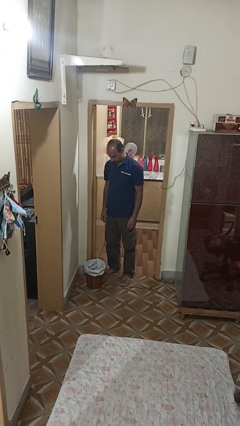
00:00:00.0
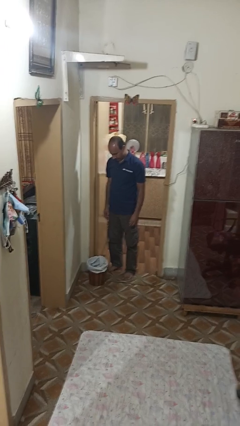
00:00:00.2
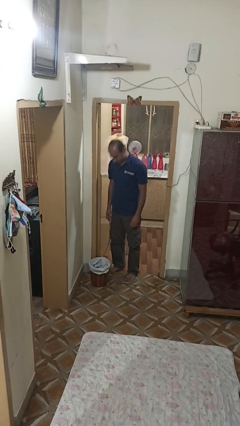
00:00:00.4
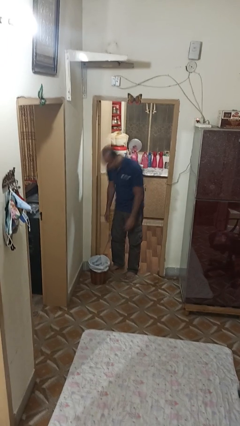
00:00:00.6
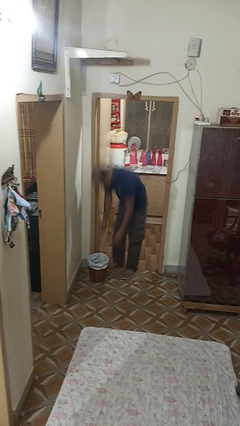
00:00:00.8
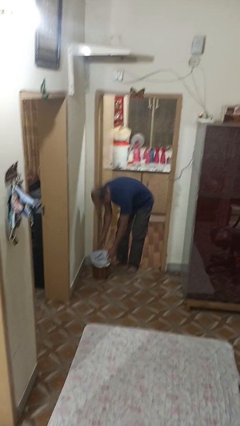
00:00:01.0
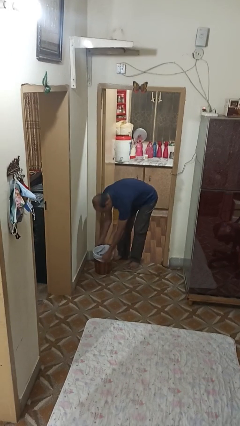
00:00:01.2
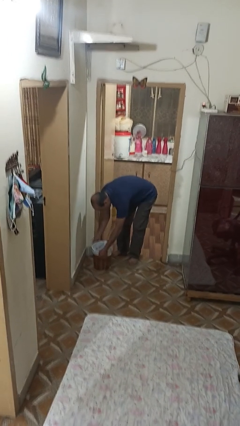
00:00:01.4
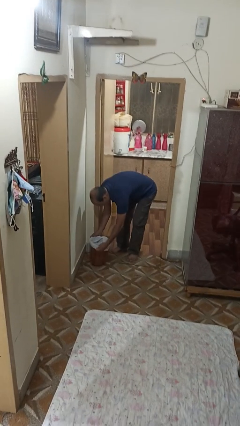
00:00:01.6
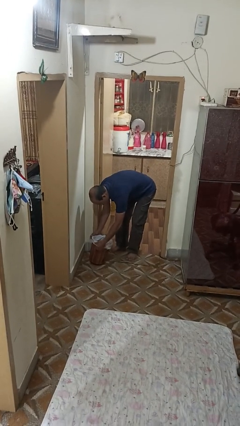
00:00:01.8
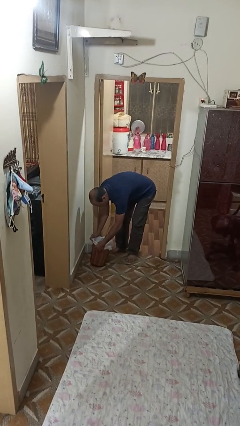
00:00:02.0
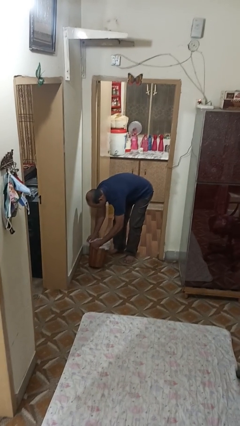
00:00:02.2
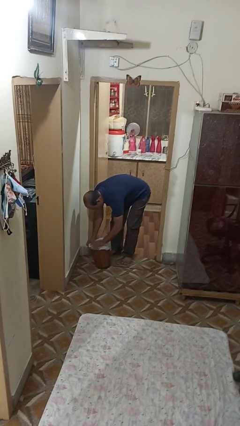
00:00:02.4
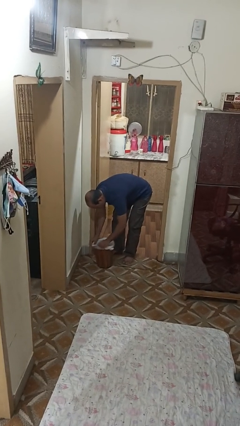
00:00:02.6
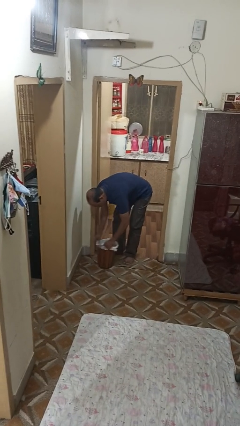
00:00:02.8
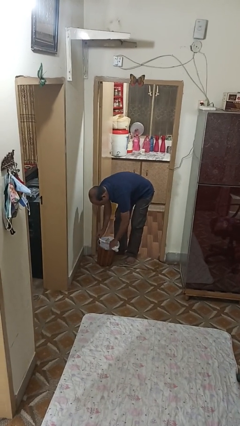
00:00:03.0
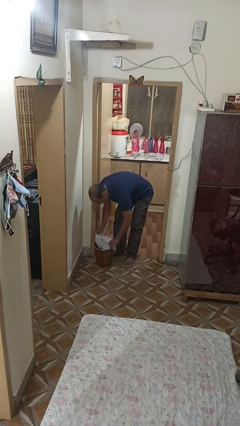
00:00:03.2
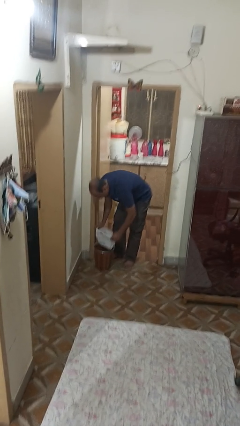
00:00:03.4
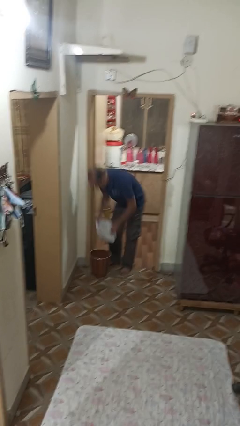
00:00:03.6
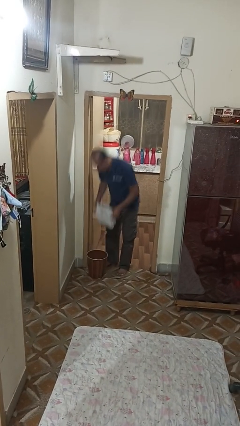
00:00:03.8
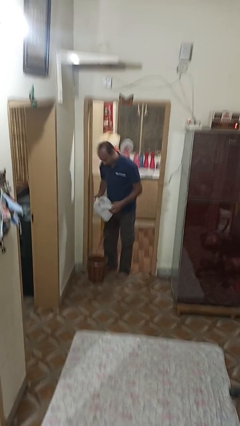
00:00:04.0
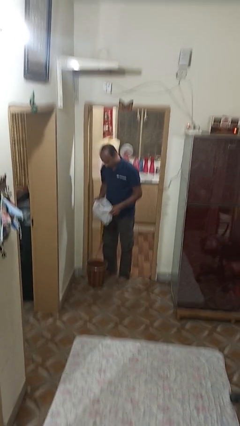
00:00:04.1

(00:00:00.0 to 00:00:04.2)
person removes trashbag from trashcan

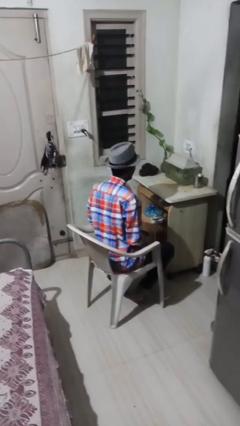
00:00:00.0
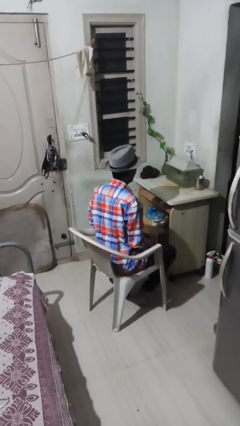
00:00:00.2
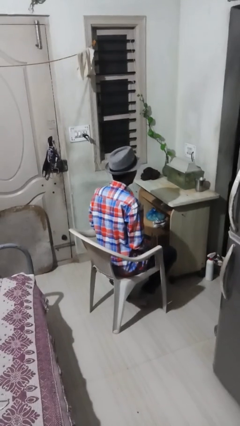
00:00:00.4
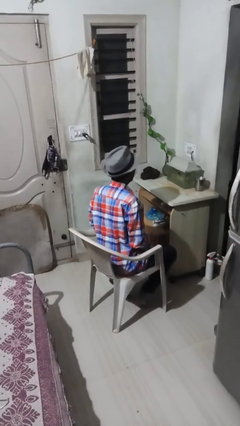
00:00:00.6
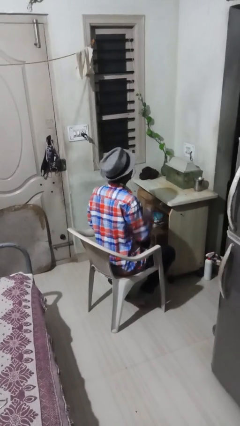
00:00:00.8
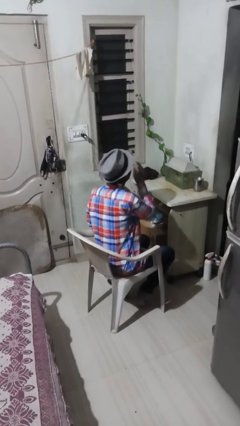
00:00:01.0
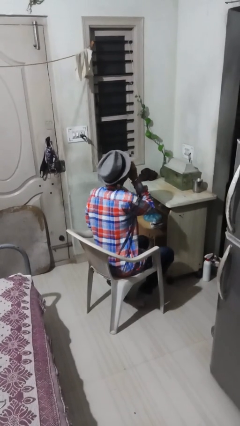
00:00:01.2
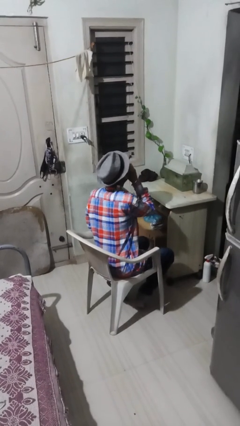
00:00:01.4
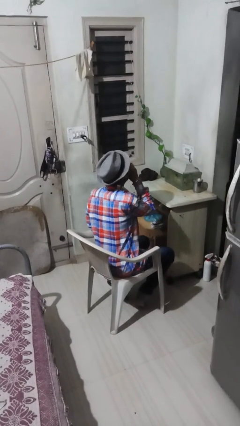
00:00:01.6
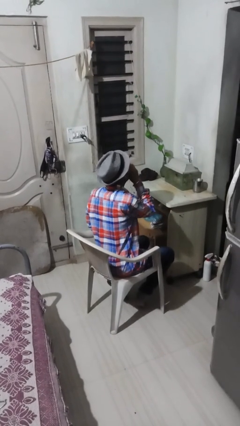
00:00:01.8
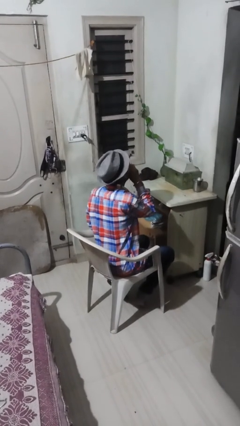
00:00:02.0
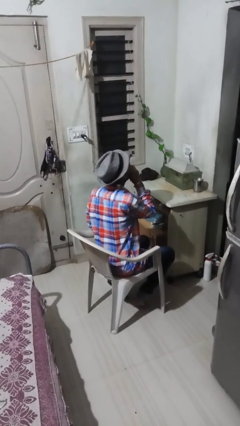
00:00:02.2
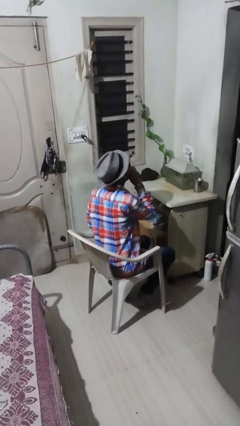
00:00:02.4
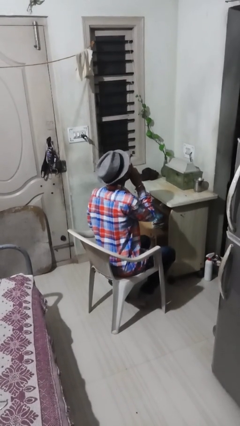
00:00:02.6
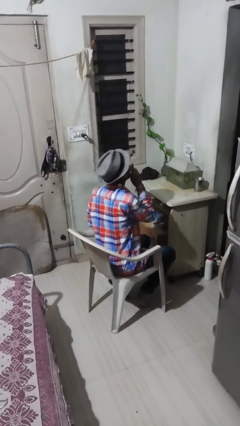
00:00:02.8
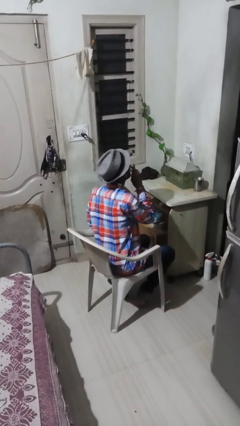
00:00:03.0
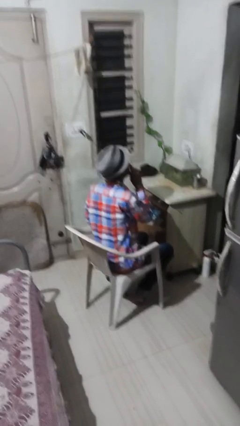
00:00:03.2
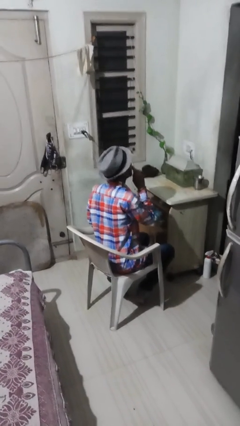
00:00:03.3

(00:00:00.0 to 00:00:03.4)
person licks fingers

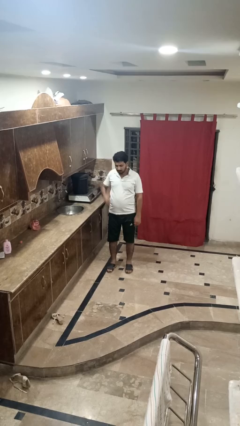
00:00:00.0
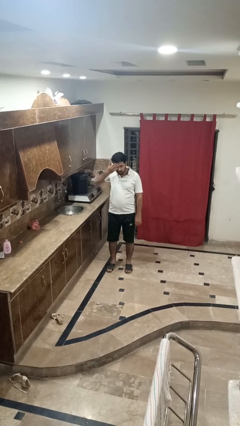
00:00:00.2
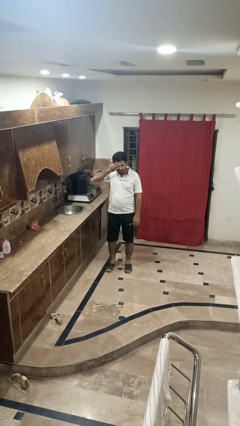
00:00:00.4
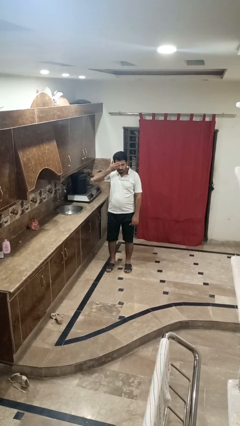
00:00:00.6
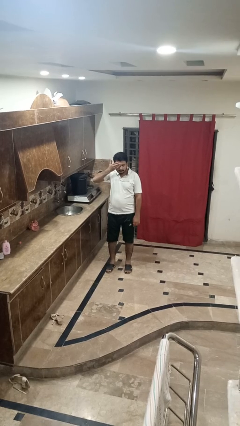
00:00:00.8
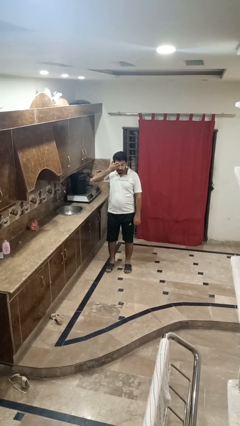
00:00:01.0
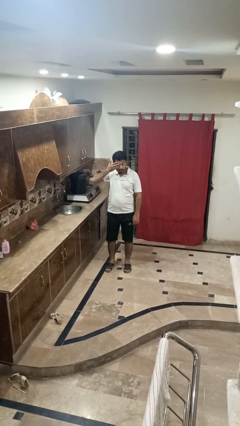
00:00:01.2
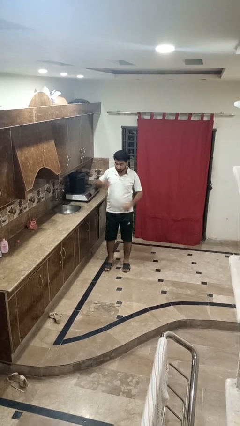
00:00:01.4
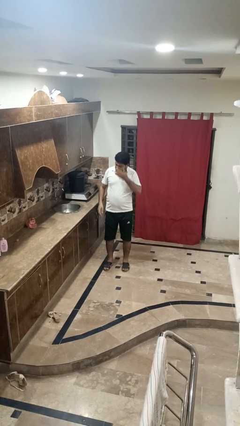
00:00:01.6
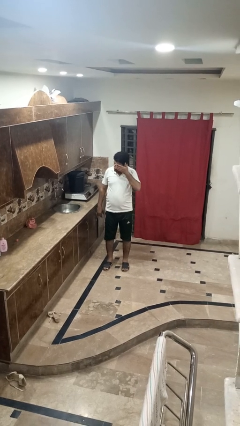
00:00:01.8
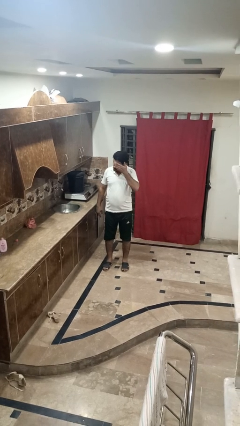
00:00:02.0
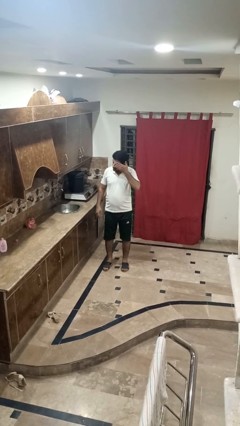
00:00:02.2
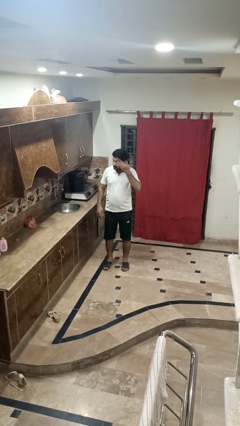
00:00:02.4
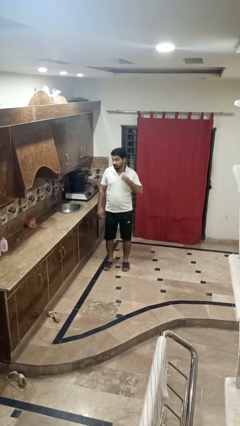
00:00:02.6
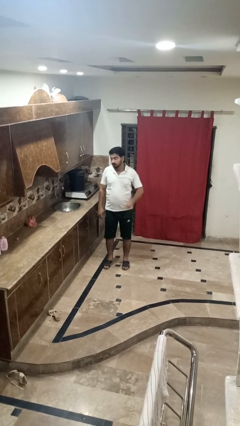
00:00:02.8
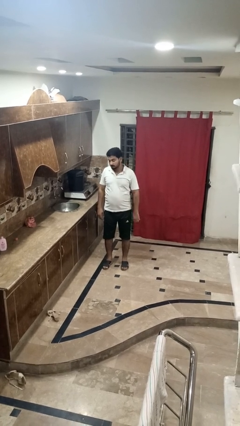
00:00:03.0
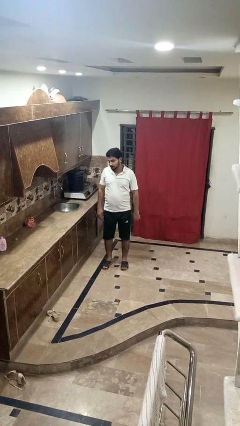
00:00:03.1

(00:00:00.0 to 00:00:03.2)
person rubs eyes

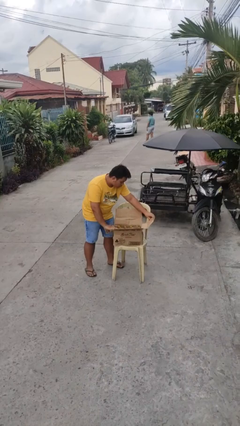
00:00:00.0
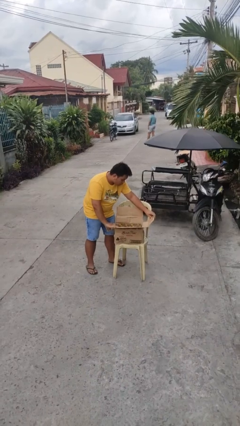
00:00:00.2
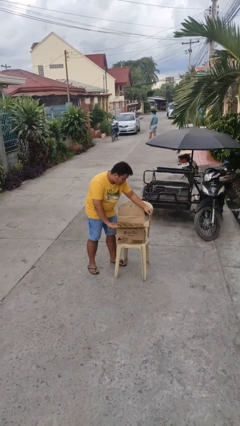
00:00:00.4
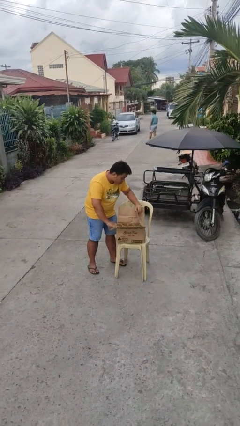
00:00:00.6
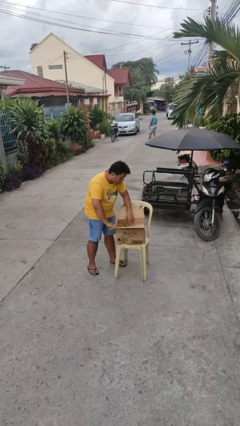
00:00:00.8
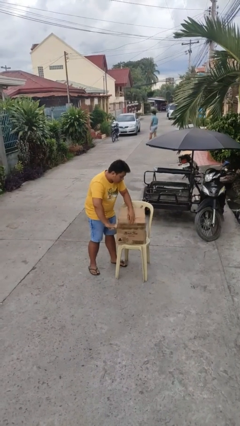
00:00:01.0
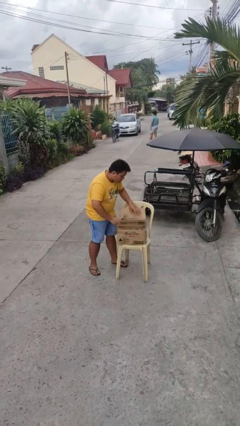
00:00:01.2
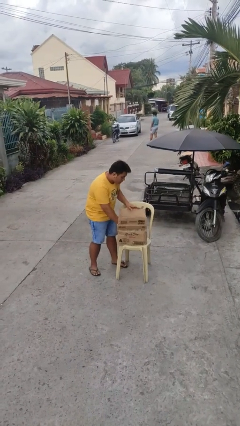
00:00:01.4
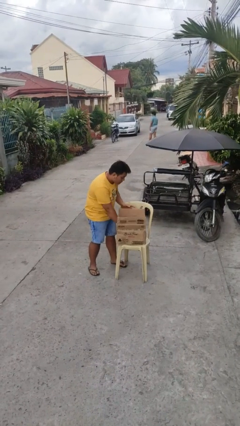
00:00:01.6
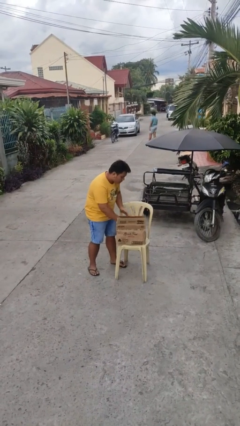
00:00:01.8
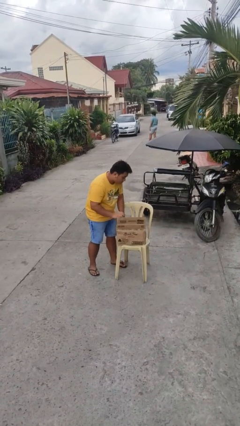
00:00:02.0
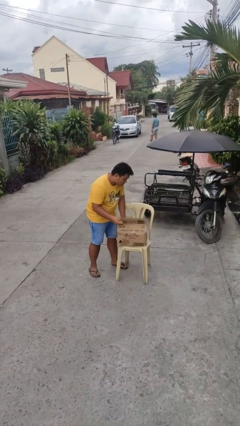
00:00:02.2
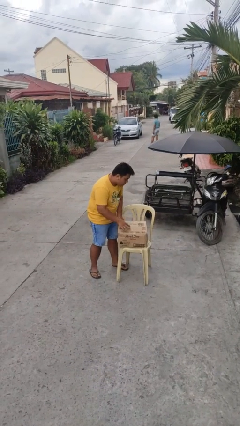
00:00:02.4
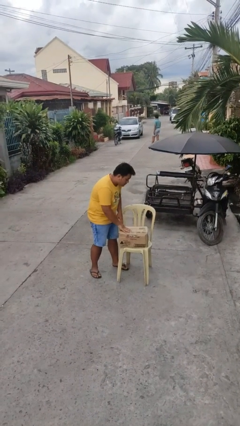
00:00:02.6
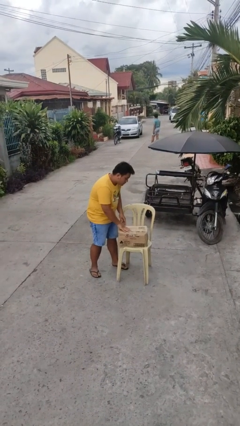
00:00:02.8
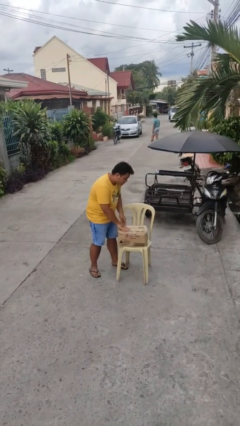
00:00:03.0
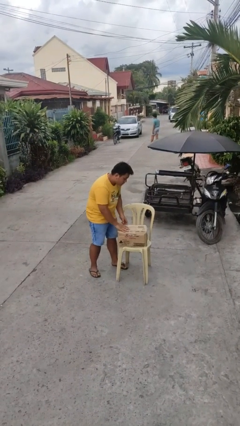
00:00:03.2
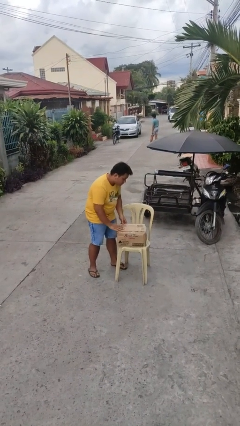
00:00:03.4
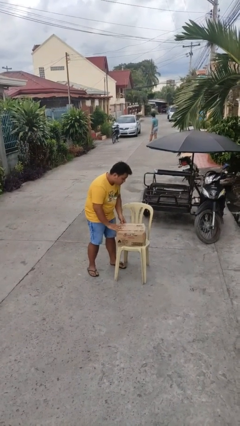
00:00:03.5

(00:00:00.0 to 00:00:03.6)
person closes box

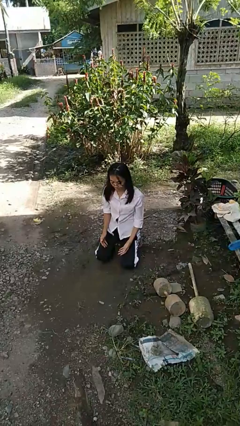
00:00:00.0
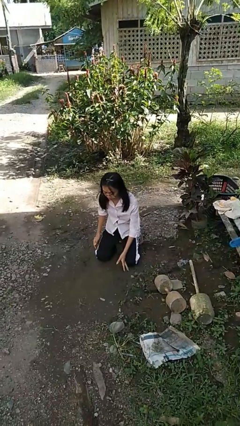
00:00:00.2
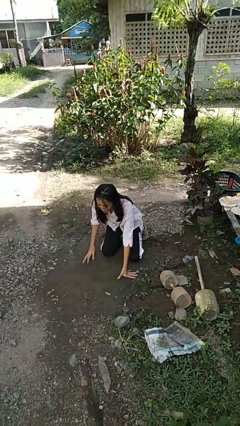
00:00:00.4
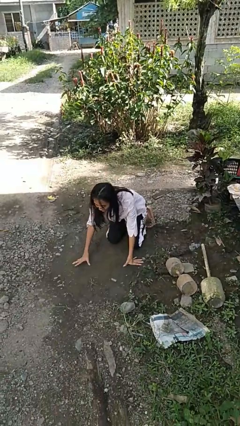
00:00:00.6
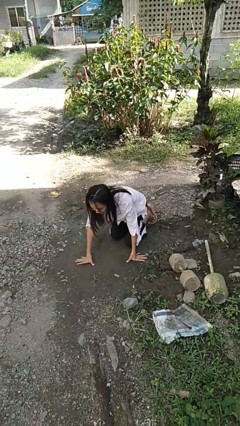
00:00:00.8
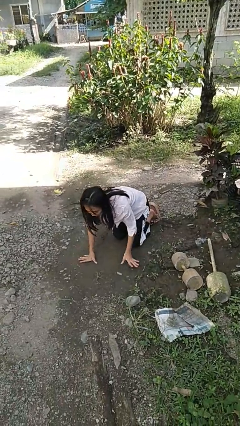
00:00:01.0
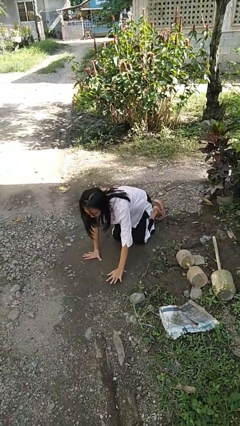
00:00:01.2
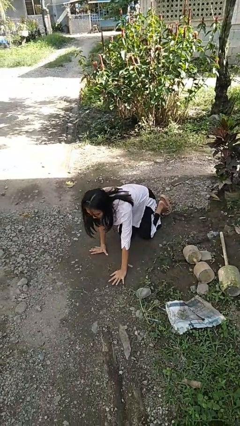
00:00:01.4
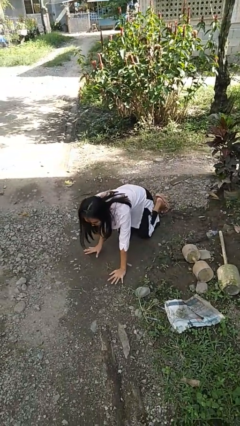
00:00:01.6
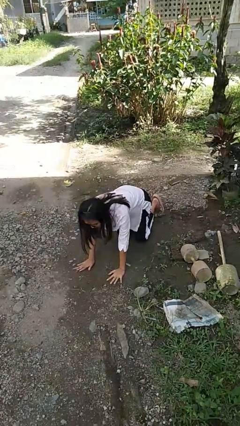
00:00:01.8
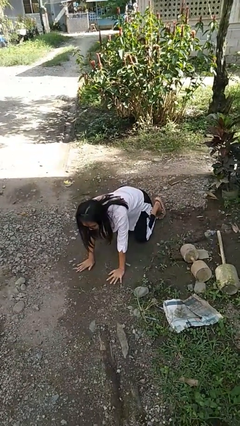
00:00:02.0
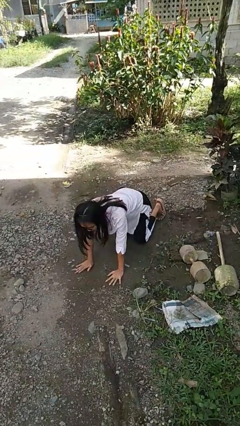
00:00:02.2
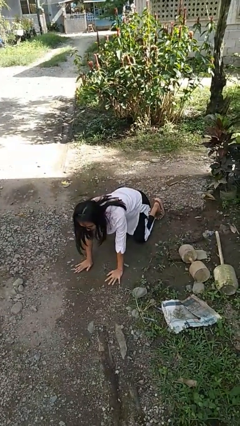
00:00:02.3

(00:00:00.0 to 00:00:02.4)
person crawls

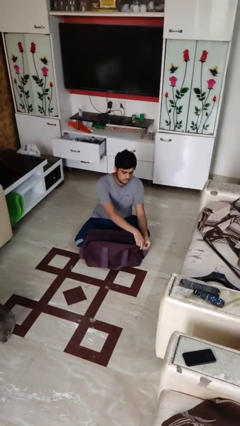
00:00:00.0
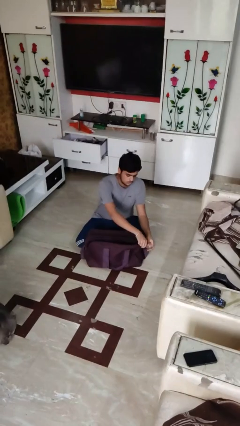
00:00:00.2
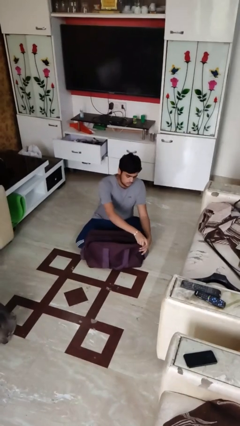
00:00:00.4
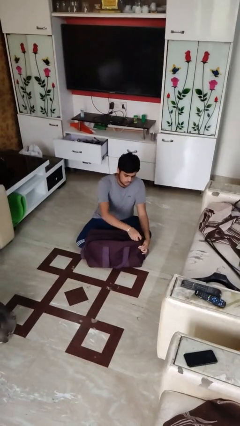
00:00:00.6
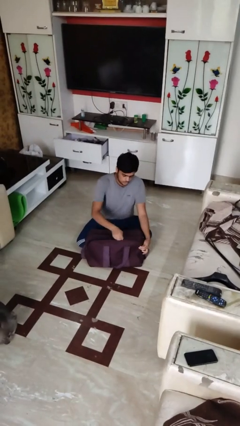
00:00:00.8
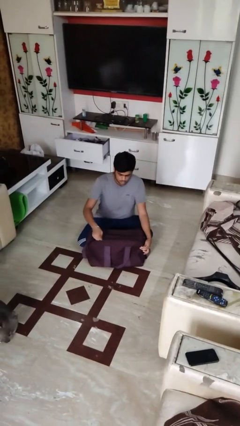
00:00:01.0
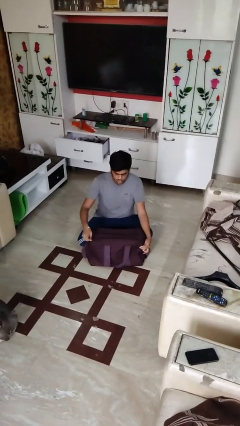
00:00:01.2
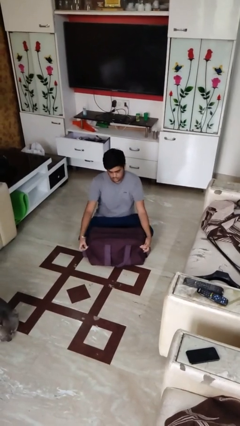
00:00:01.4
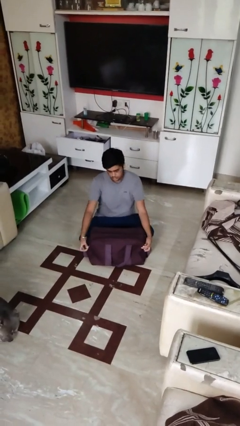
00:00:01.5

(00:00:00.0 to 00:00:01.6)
person closes suitcase
